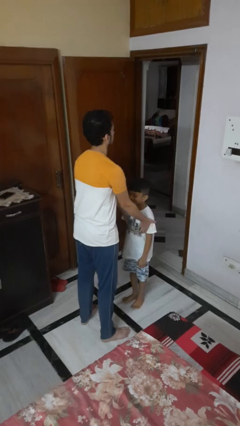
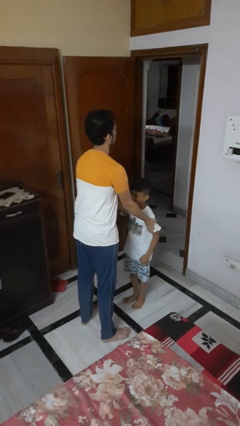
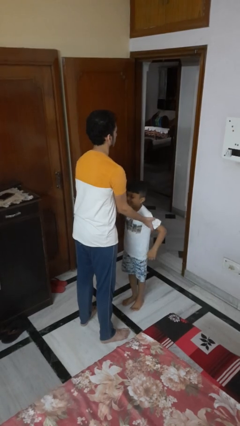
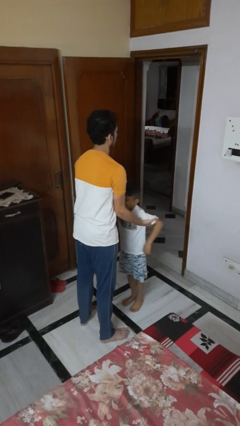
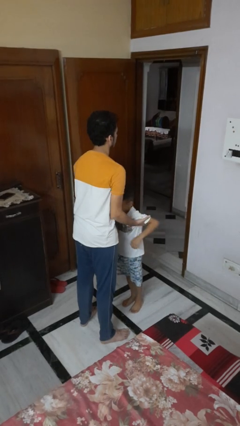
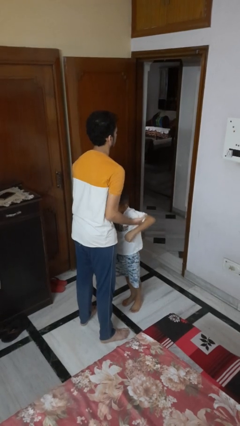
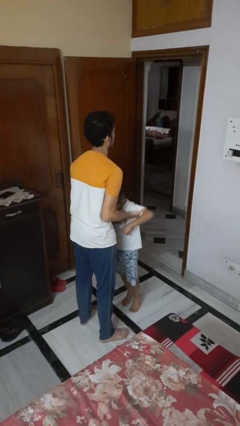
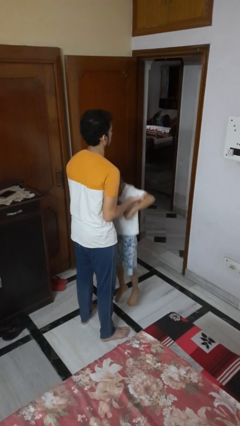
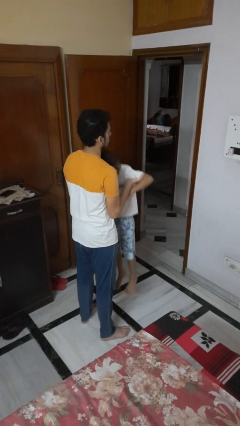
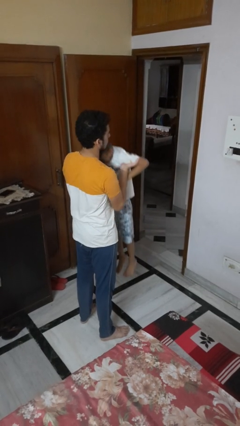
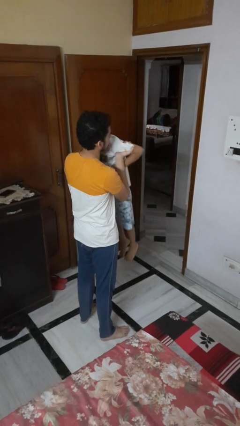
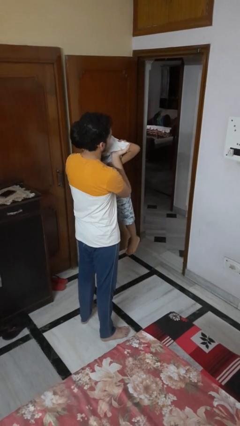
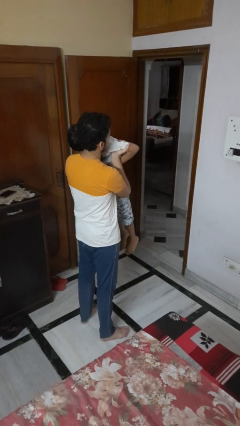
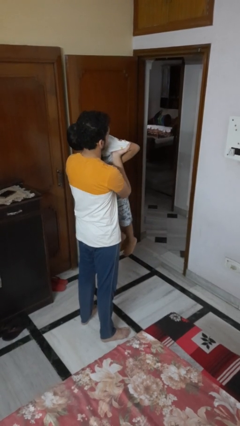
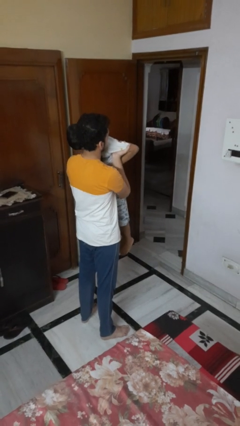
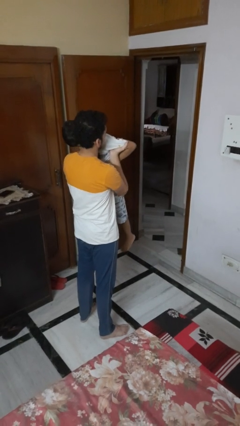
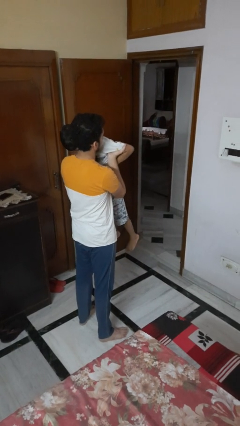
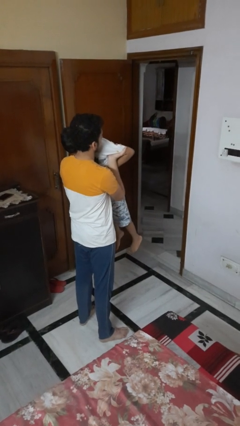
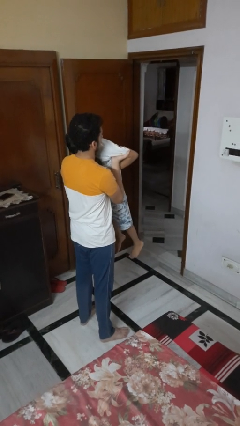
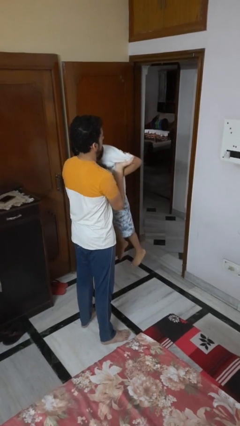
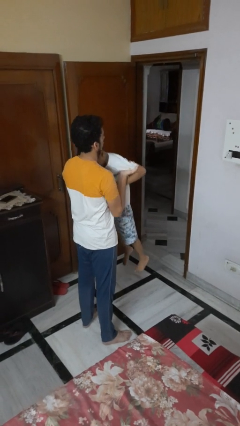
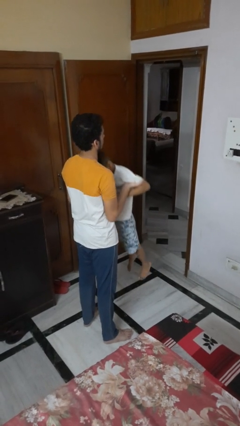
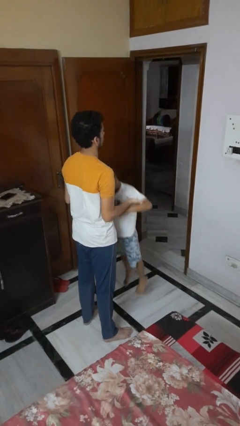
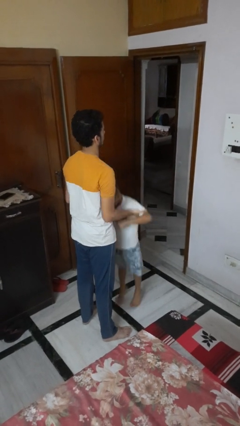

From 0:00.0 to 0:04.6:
person picks up person

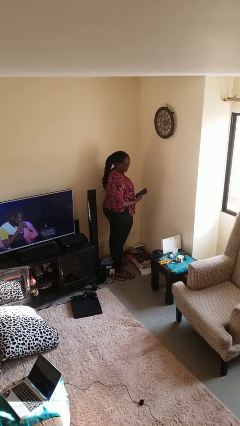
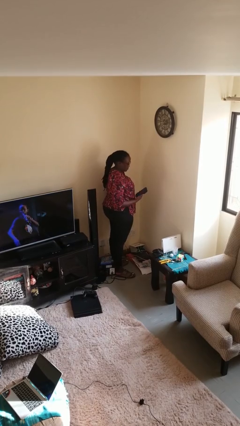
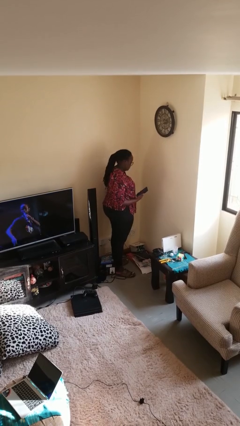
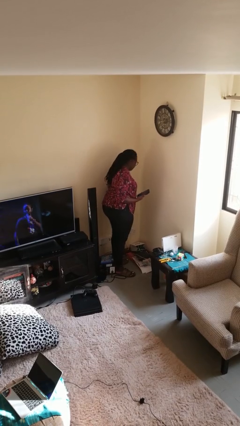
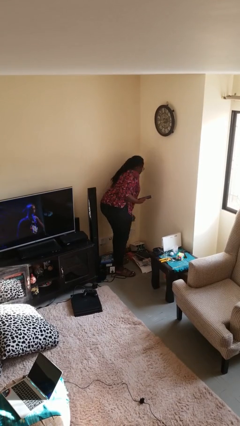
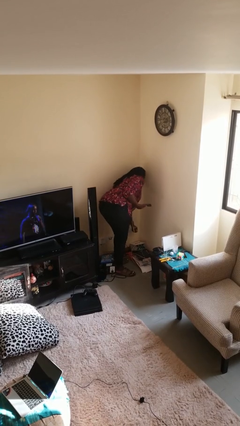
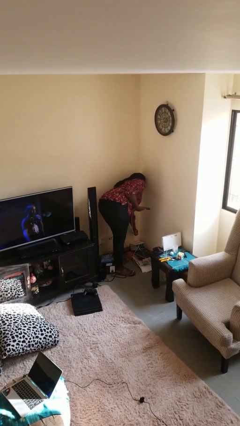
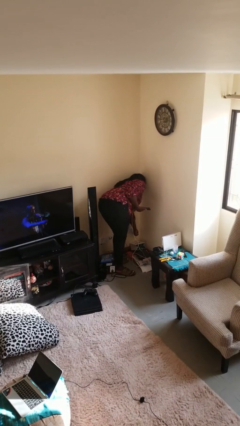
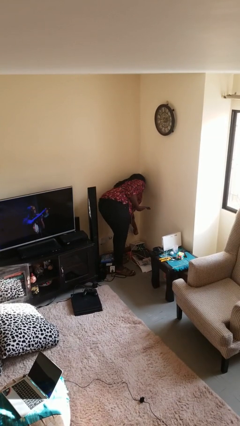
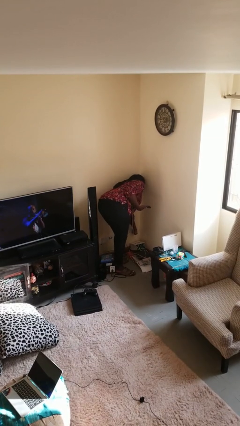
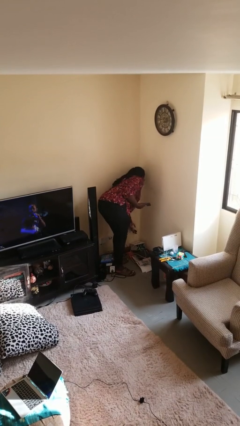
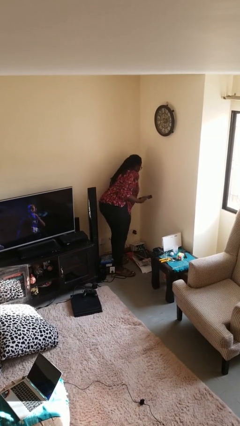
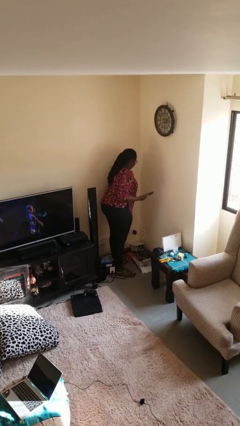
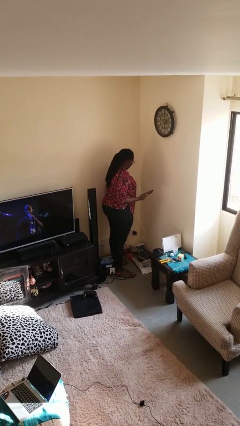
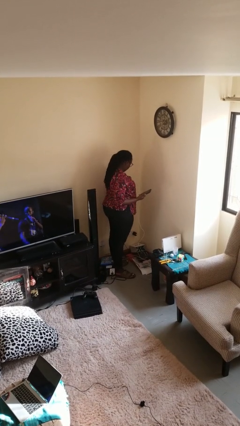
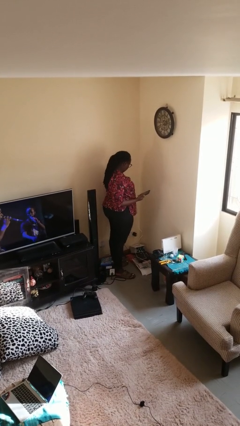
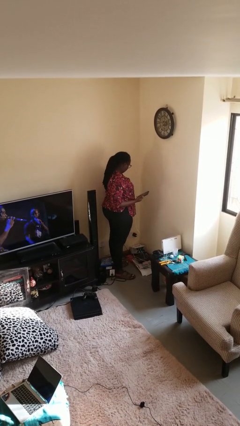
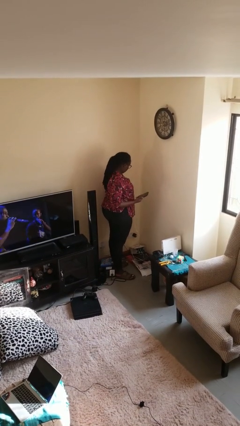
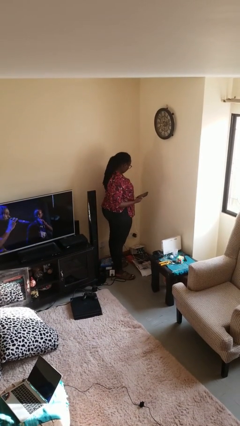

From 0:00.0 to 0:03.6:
person plugs into electrical socket

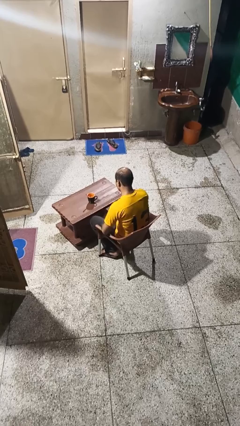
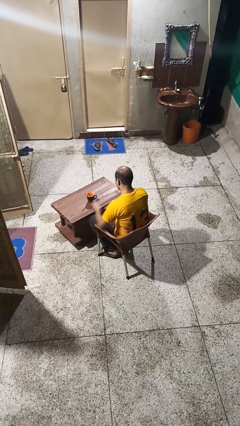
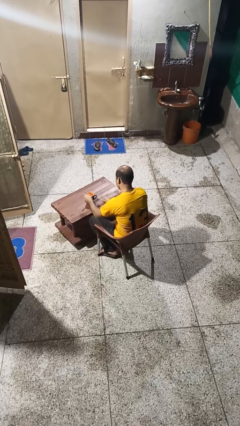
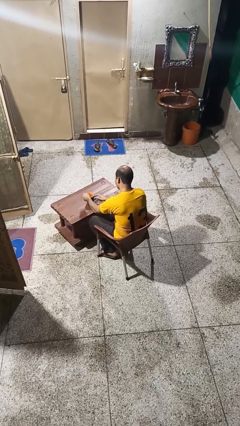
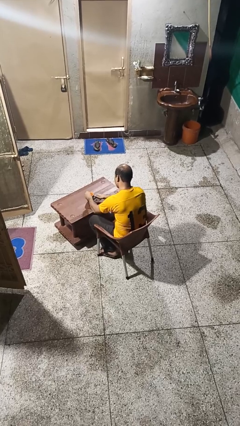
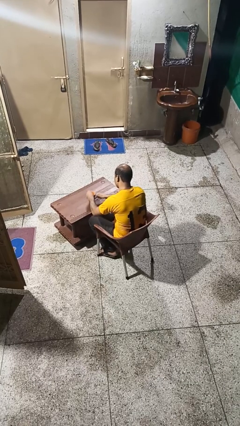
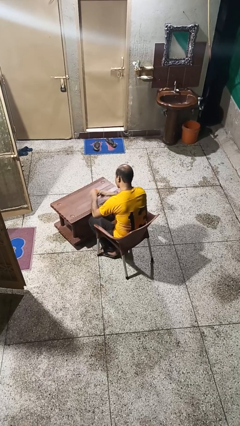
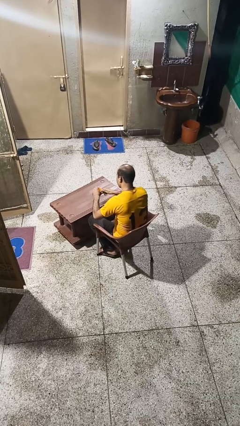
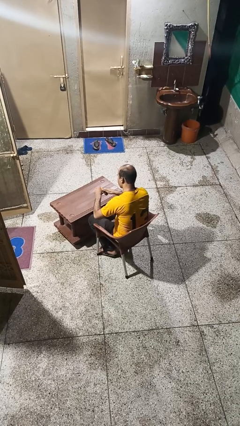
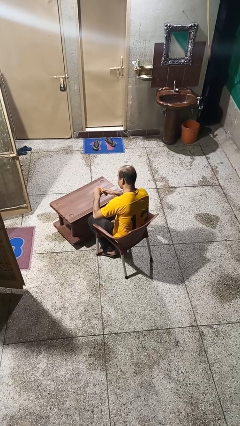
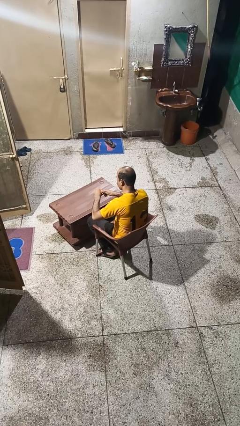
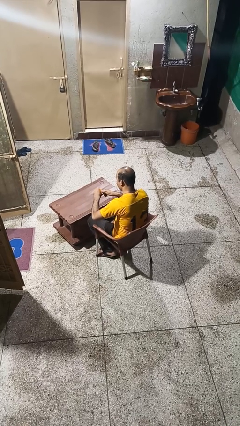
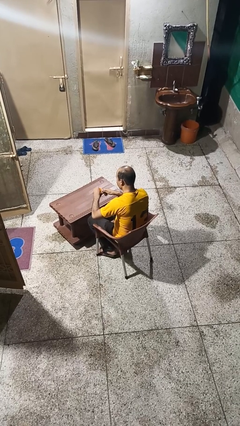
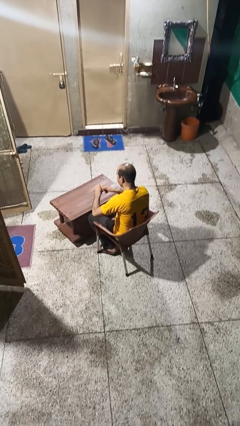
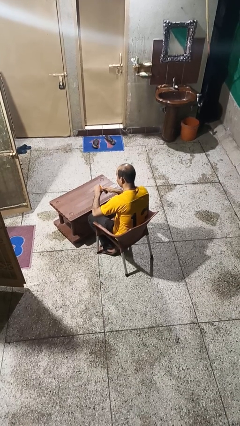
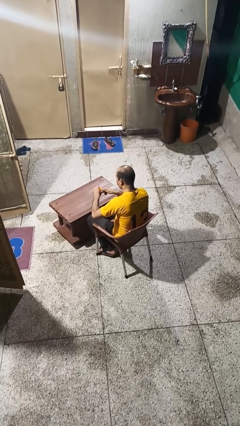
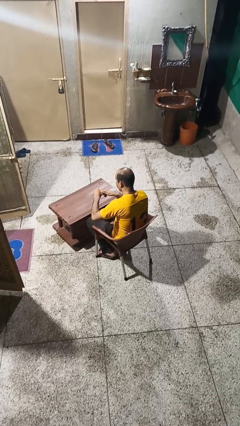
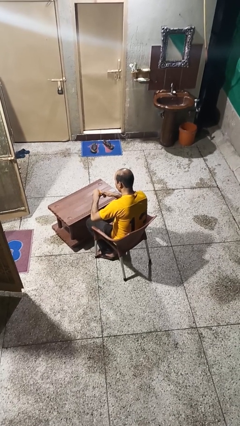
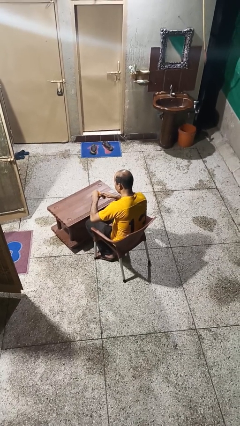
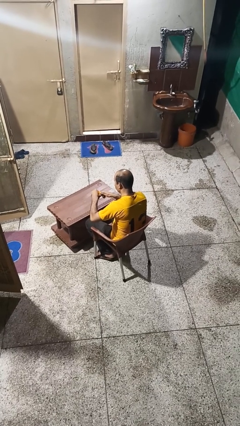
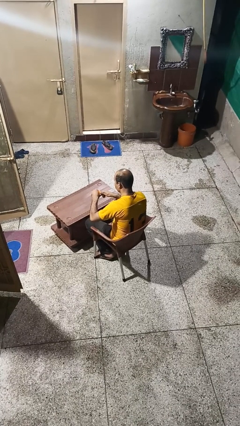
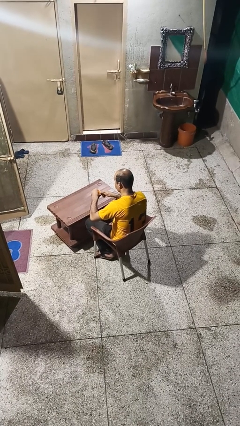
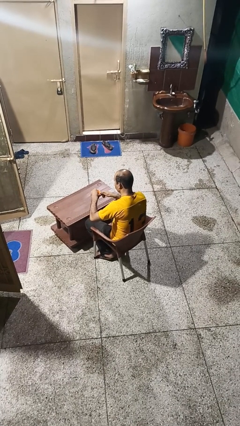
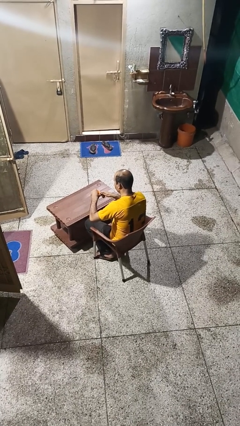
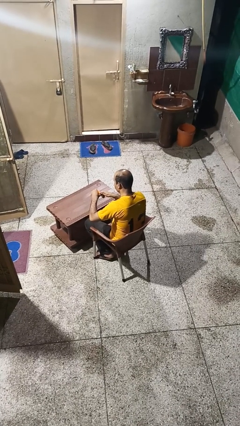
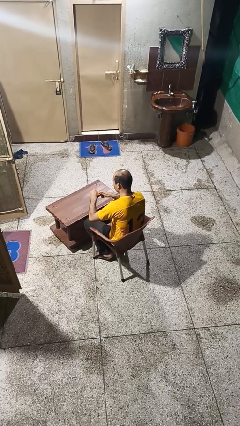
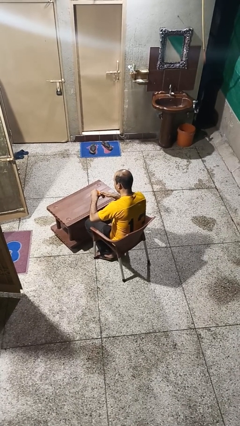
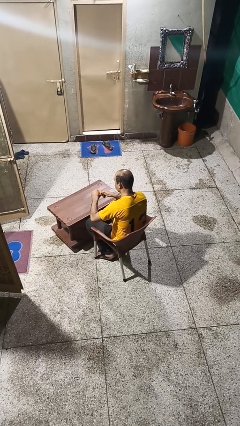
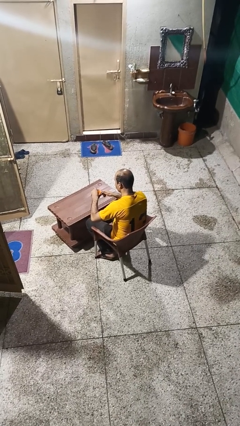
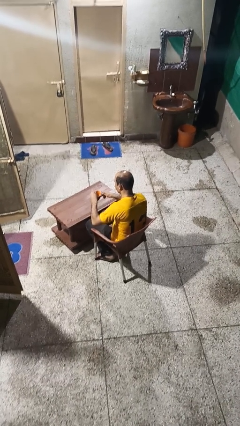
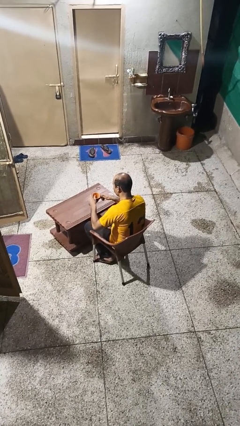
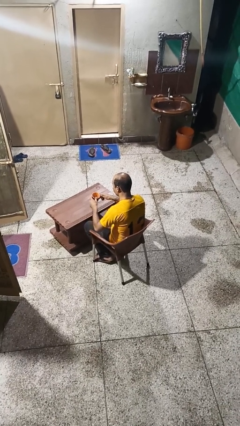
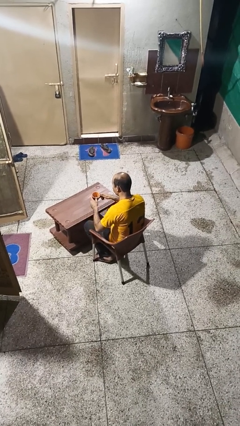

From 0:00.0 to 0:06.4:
person stirs mug

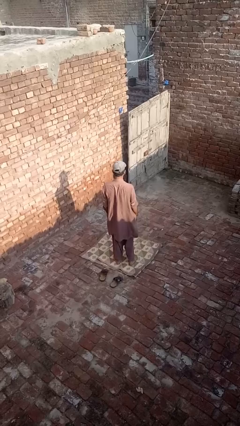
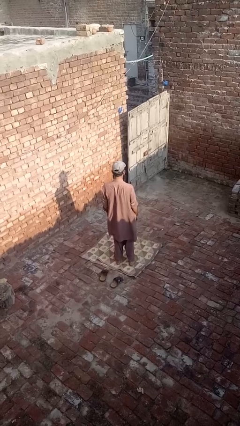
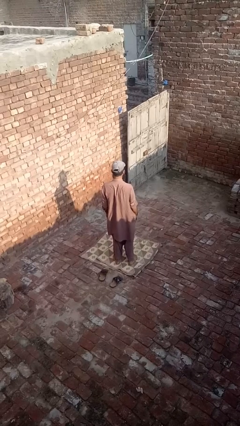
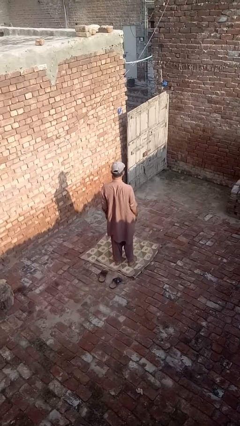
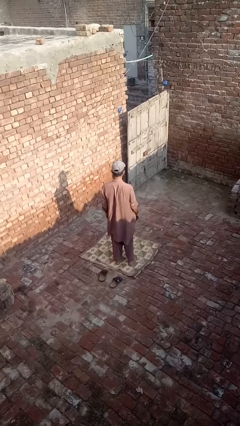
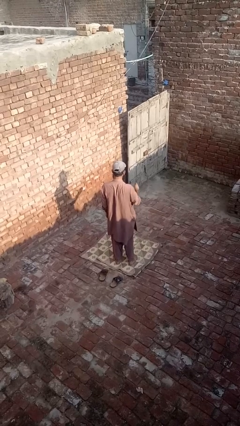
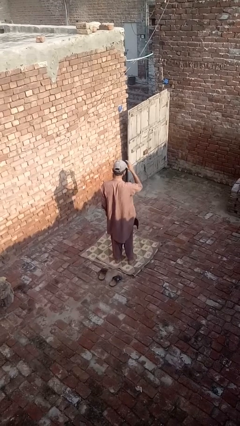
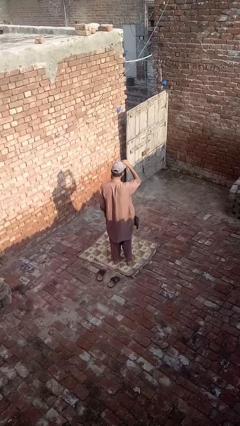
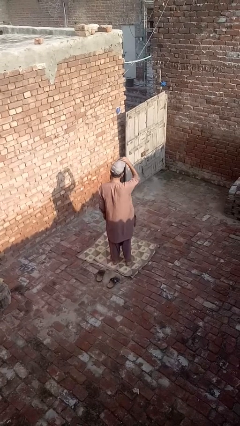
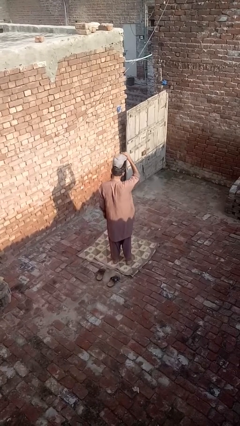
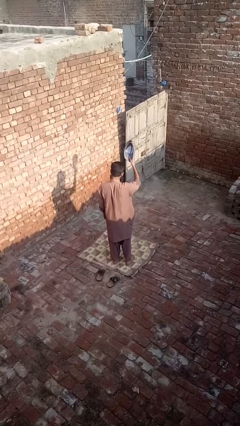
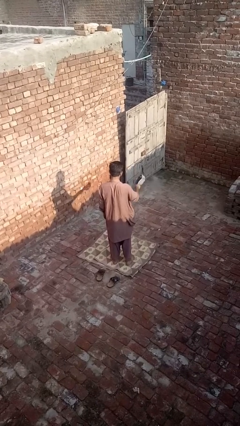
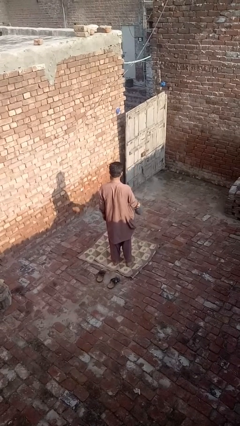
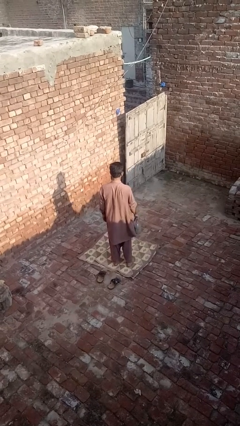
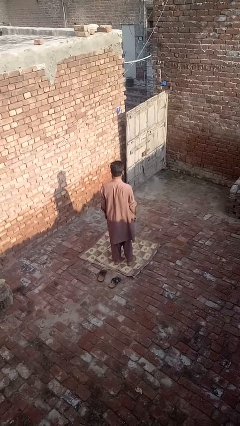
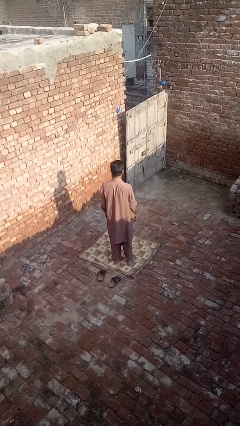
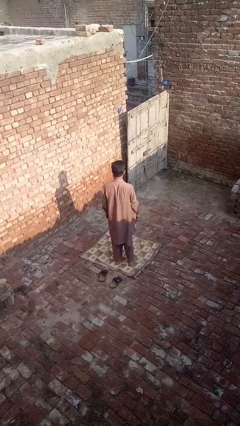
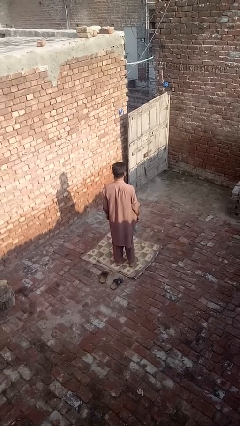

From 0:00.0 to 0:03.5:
person takes off hat
